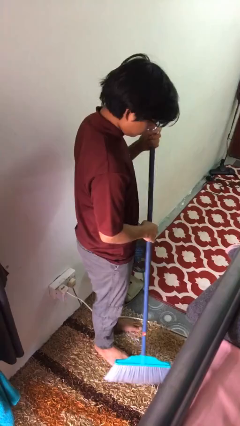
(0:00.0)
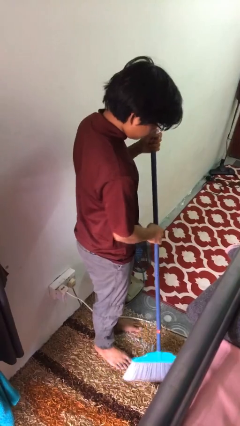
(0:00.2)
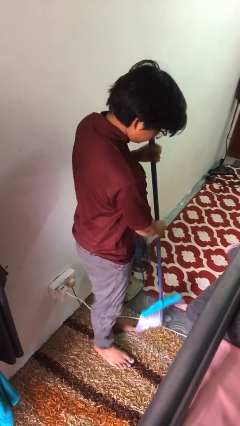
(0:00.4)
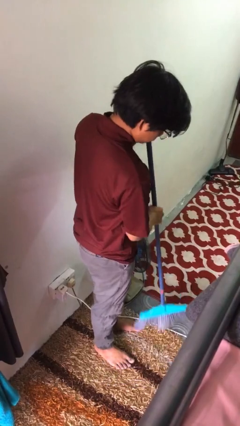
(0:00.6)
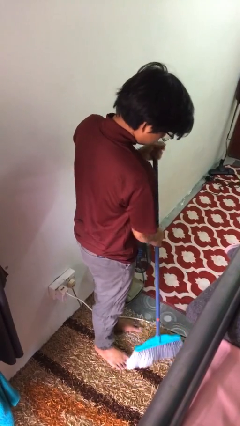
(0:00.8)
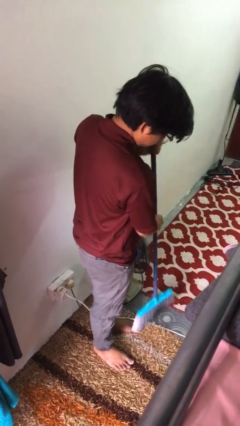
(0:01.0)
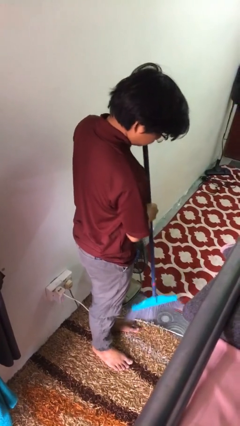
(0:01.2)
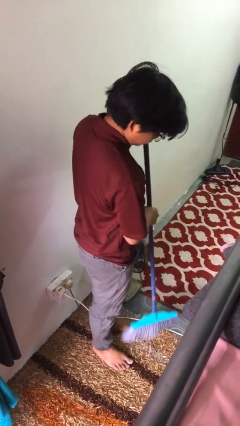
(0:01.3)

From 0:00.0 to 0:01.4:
person sweeps floor

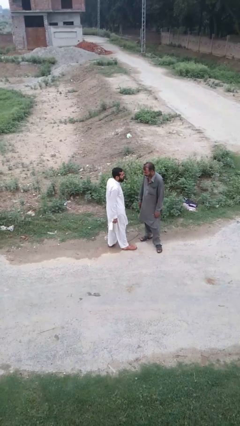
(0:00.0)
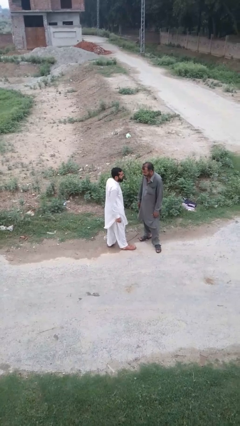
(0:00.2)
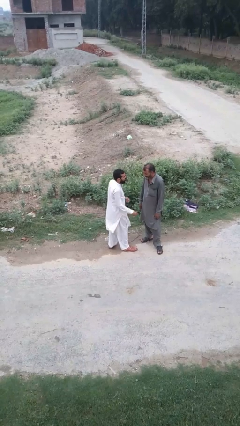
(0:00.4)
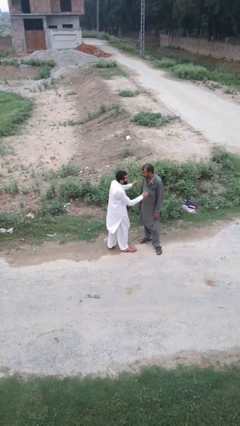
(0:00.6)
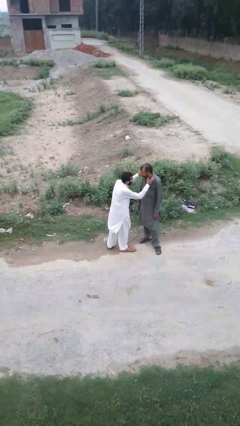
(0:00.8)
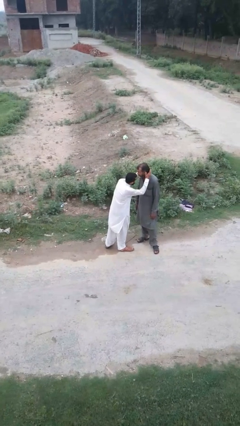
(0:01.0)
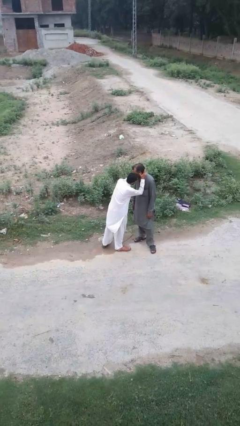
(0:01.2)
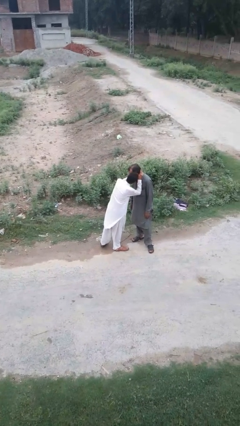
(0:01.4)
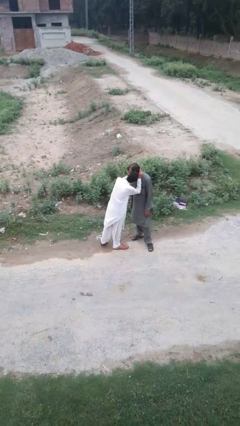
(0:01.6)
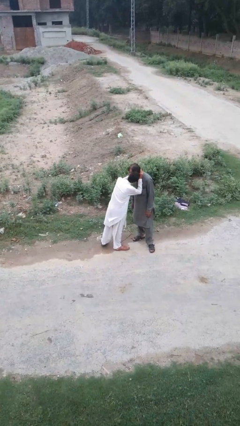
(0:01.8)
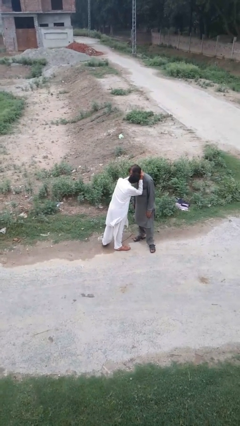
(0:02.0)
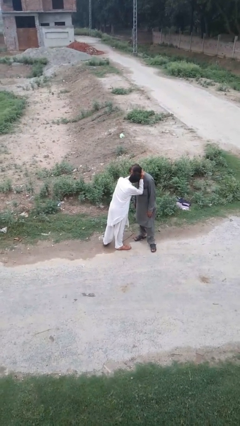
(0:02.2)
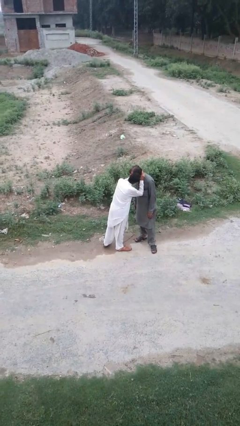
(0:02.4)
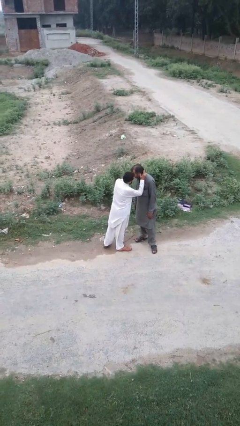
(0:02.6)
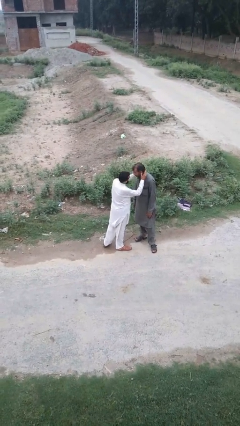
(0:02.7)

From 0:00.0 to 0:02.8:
person kisses cheek of person

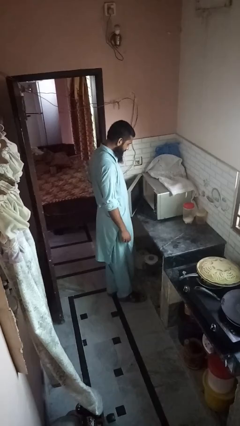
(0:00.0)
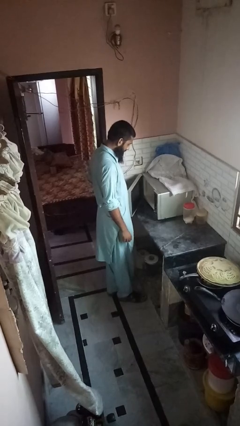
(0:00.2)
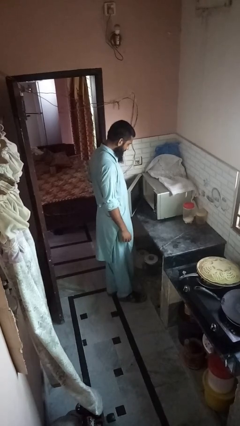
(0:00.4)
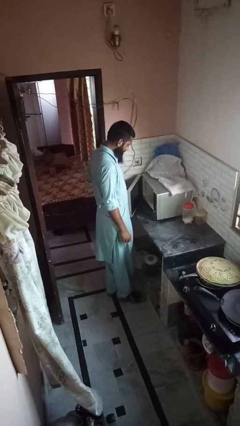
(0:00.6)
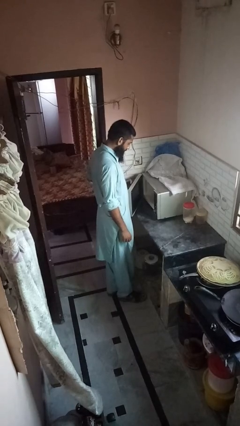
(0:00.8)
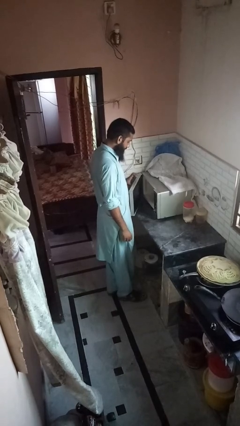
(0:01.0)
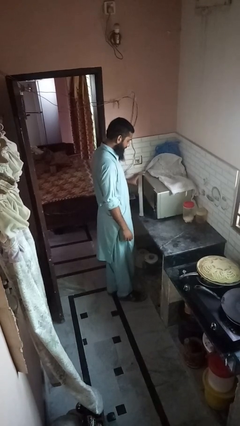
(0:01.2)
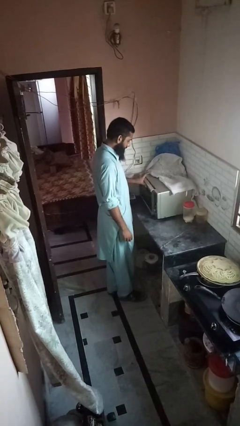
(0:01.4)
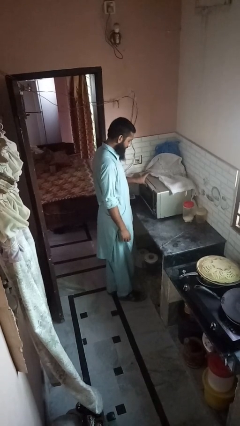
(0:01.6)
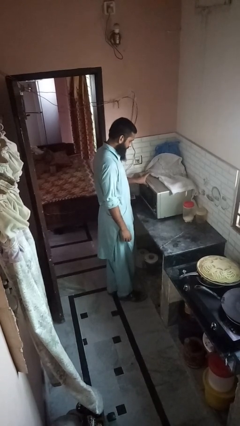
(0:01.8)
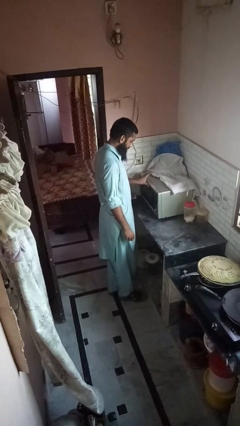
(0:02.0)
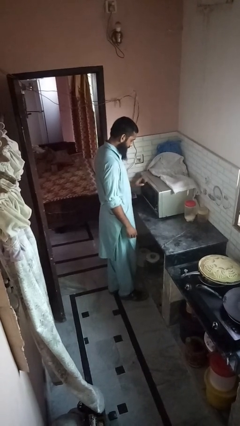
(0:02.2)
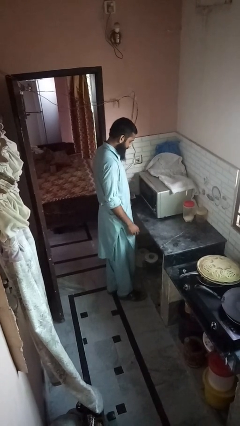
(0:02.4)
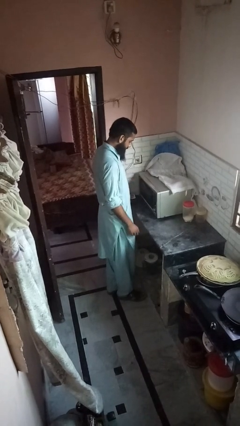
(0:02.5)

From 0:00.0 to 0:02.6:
person closes microwave

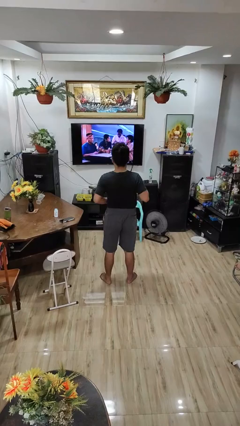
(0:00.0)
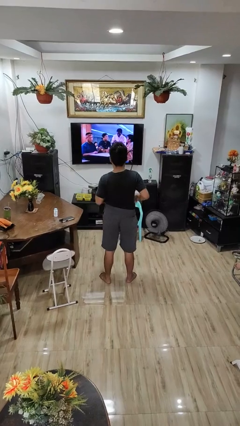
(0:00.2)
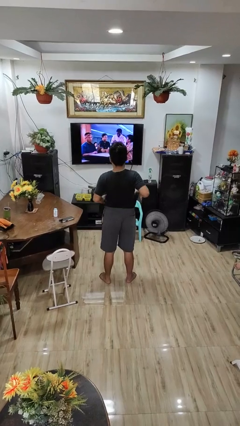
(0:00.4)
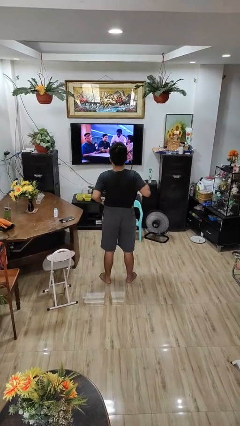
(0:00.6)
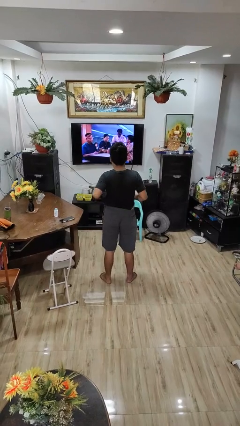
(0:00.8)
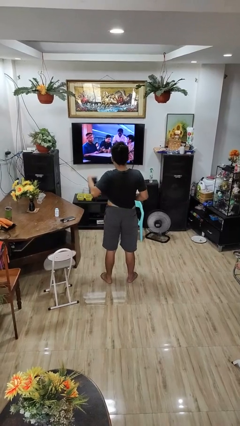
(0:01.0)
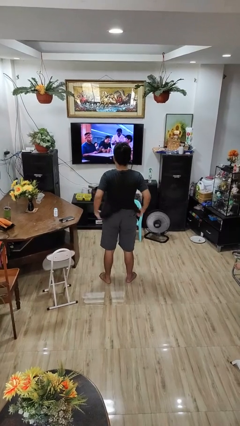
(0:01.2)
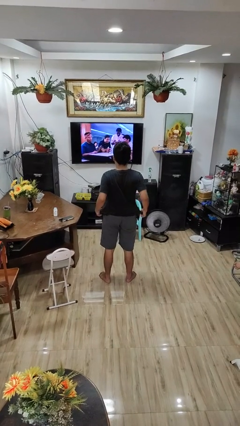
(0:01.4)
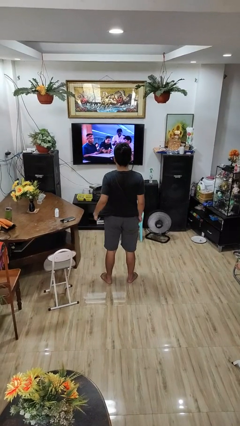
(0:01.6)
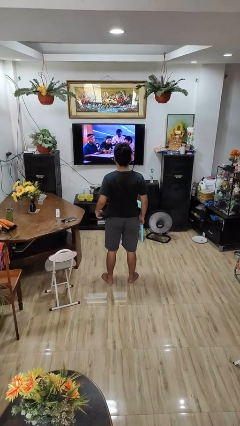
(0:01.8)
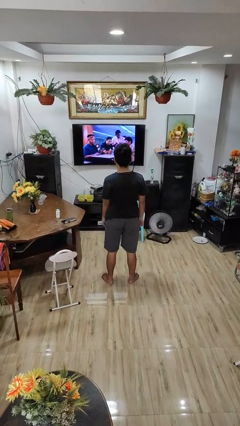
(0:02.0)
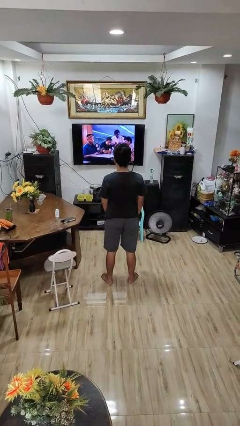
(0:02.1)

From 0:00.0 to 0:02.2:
person untucks shirt

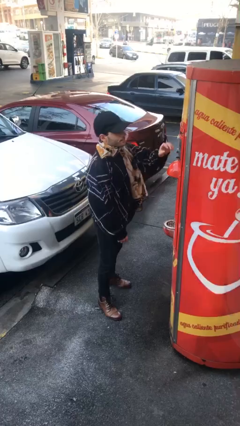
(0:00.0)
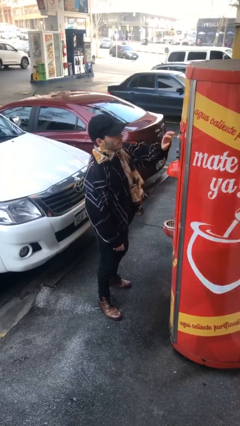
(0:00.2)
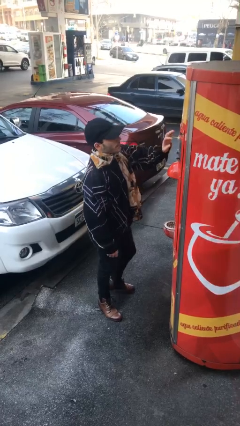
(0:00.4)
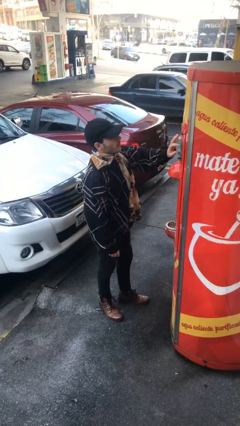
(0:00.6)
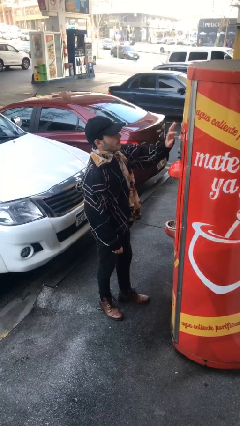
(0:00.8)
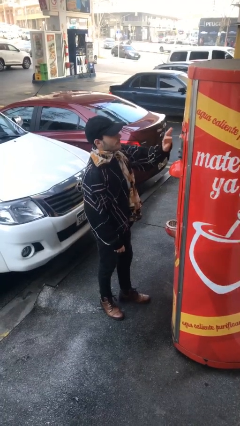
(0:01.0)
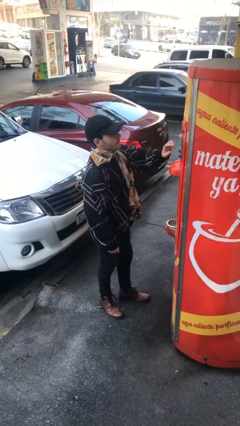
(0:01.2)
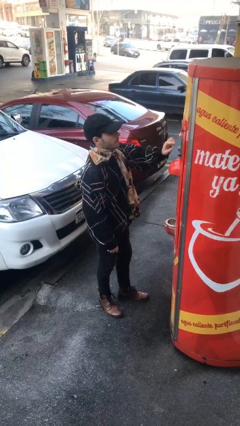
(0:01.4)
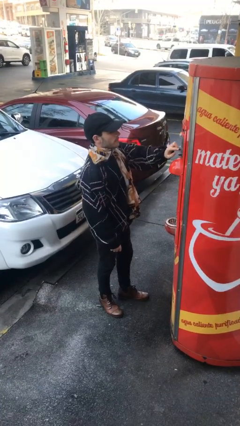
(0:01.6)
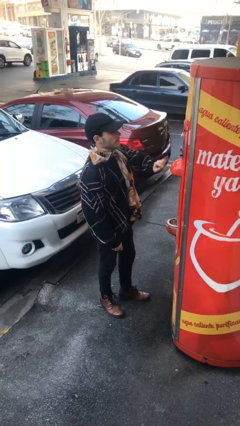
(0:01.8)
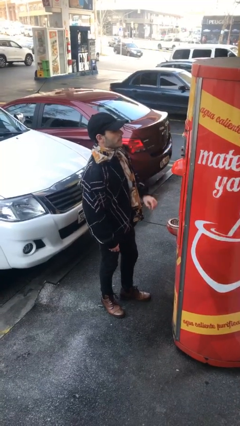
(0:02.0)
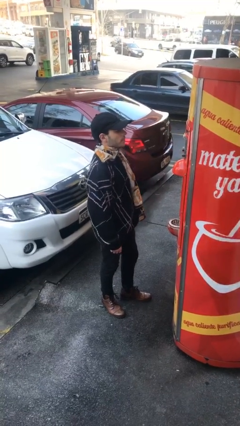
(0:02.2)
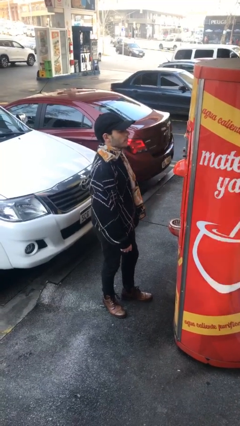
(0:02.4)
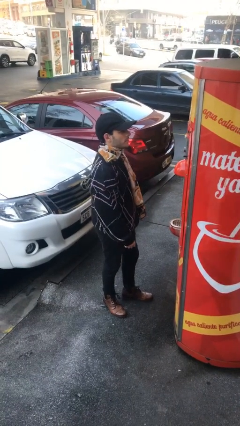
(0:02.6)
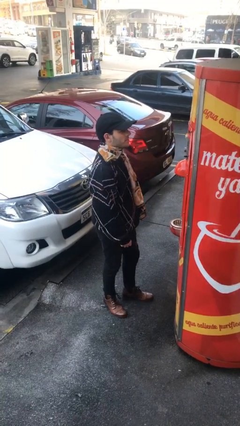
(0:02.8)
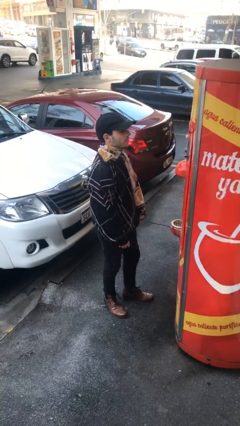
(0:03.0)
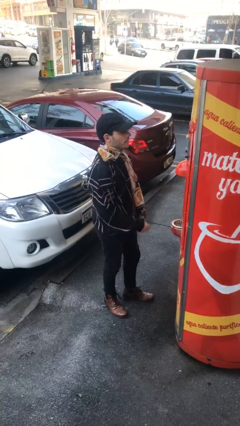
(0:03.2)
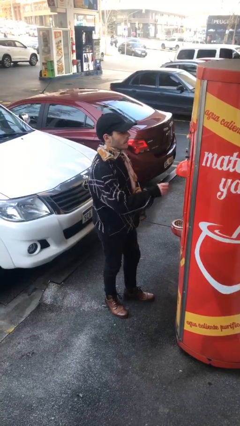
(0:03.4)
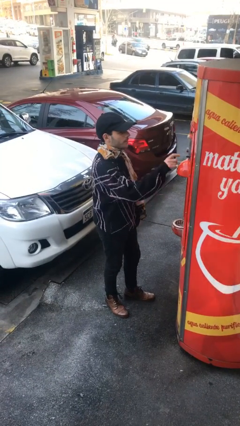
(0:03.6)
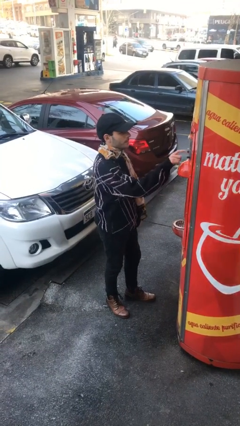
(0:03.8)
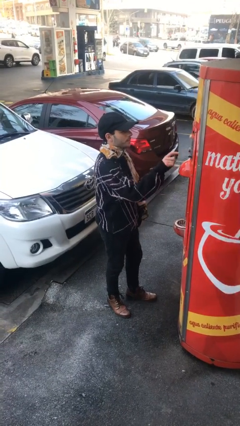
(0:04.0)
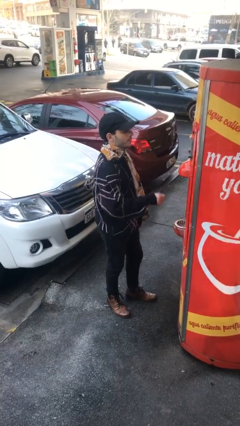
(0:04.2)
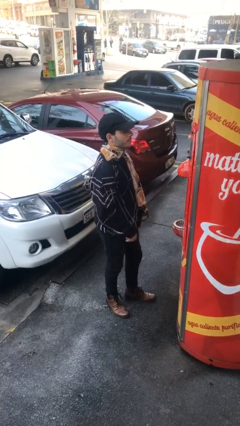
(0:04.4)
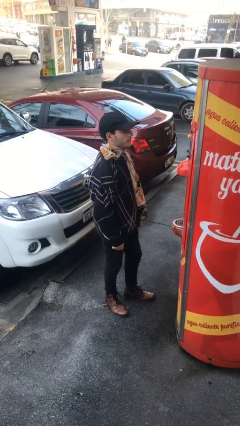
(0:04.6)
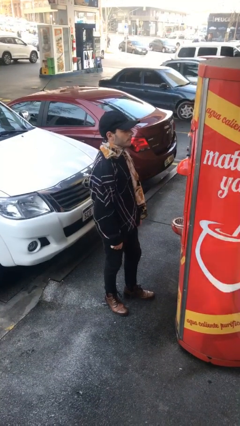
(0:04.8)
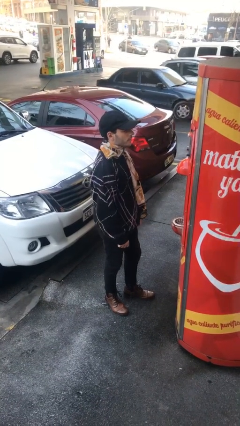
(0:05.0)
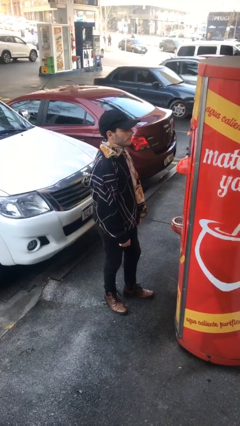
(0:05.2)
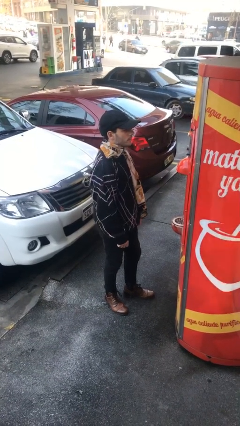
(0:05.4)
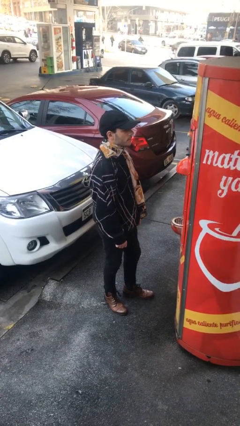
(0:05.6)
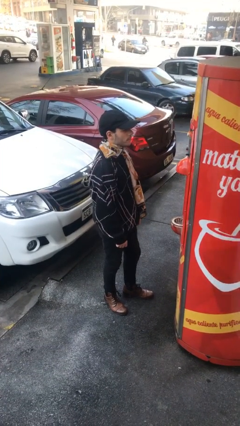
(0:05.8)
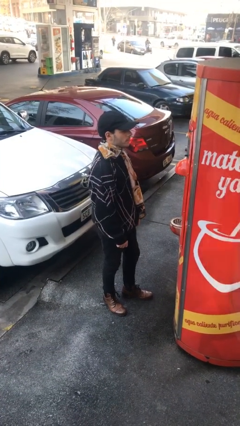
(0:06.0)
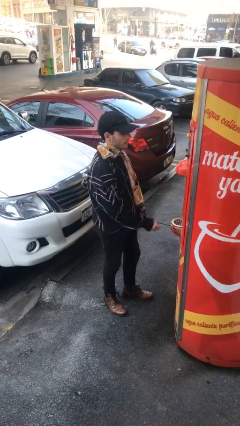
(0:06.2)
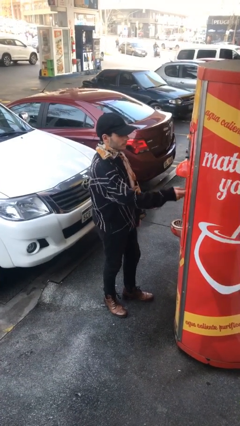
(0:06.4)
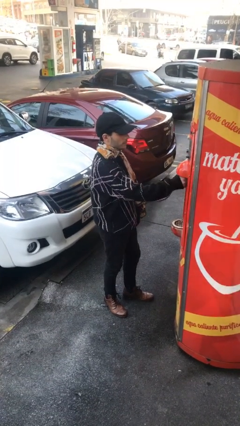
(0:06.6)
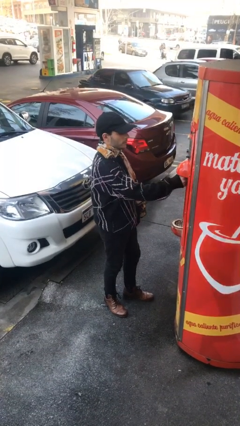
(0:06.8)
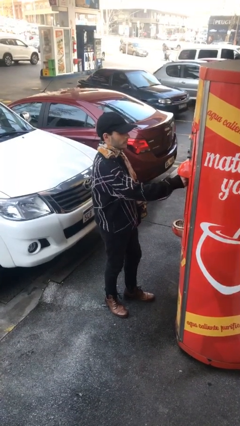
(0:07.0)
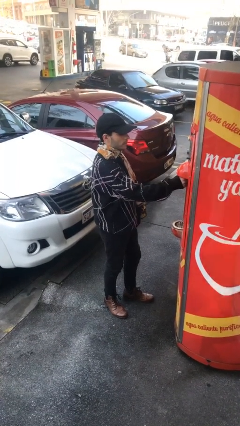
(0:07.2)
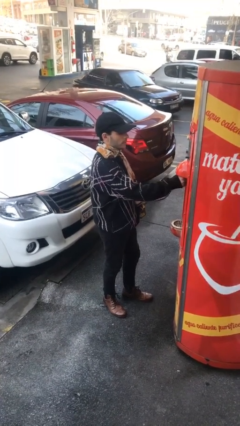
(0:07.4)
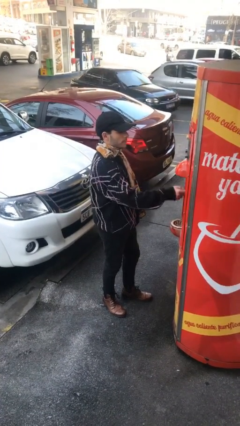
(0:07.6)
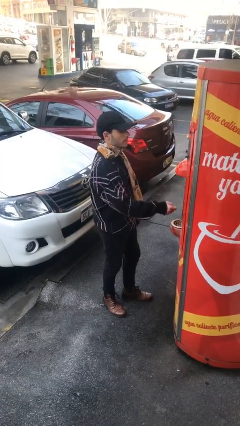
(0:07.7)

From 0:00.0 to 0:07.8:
person purchases from machine

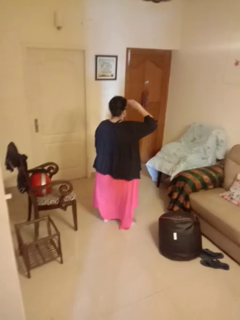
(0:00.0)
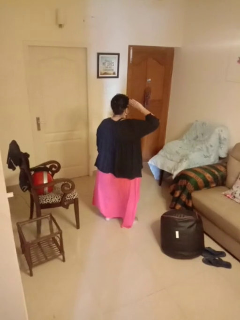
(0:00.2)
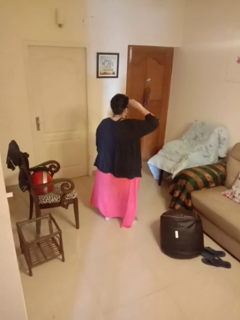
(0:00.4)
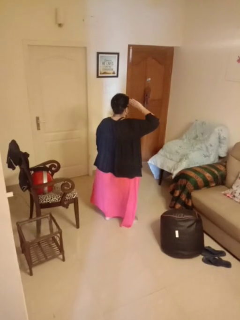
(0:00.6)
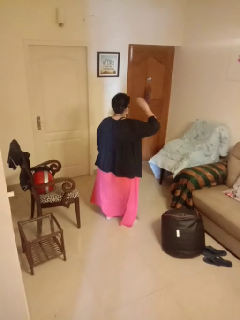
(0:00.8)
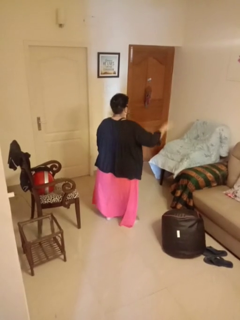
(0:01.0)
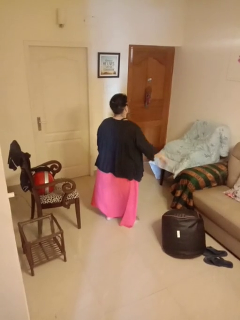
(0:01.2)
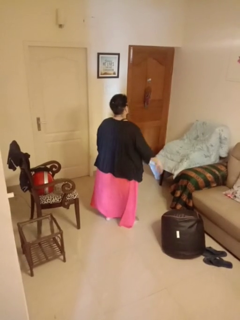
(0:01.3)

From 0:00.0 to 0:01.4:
person salutes
